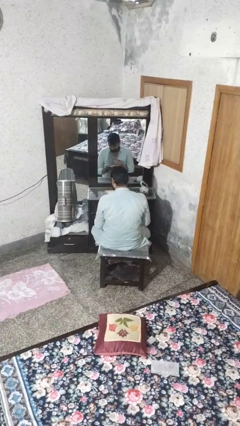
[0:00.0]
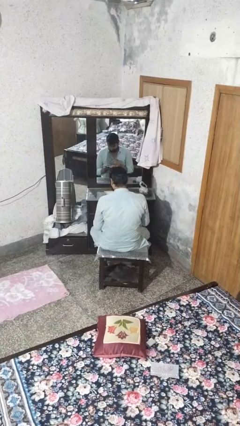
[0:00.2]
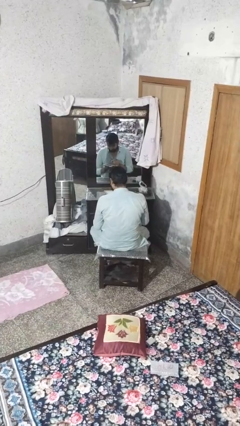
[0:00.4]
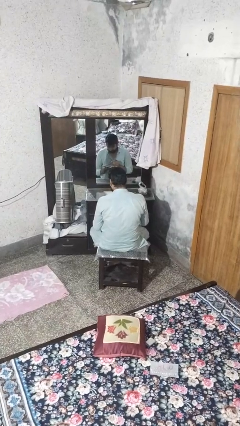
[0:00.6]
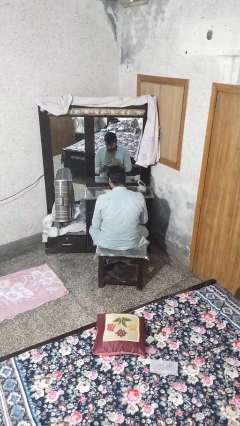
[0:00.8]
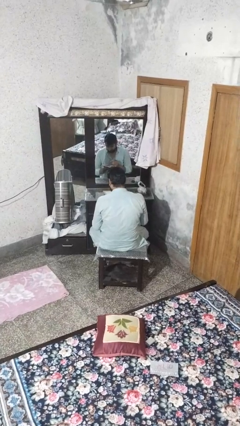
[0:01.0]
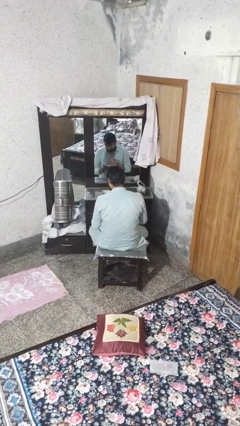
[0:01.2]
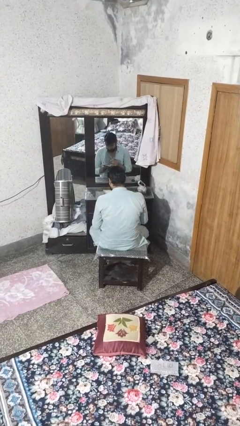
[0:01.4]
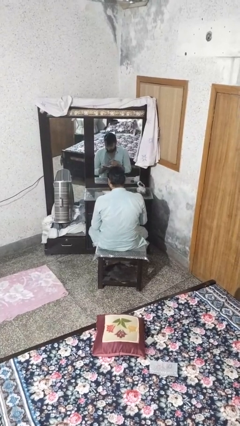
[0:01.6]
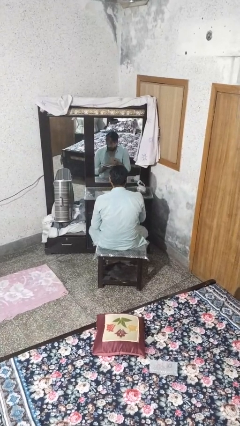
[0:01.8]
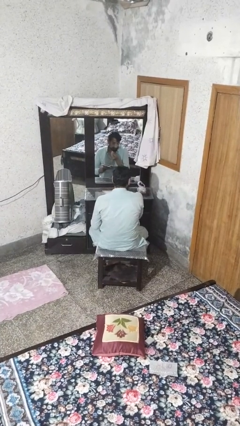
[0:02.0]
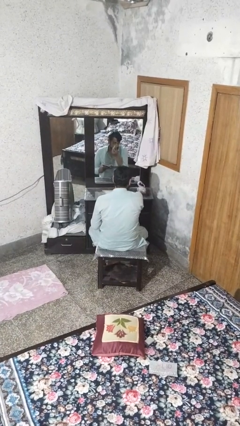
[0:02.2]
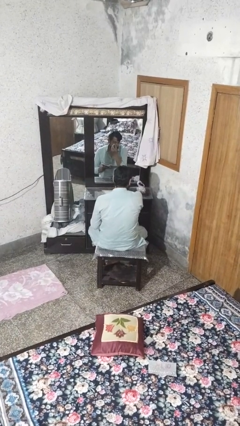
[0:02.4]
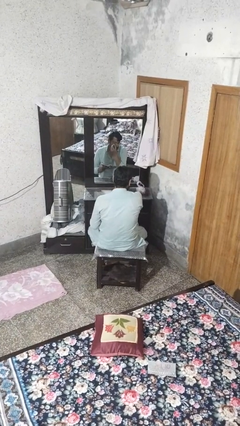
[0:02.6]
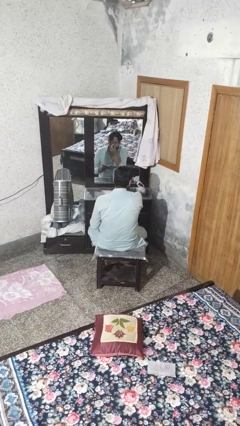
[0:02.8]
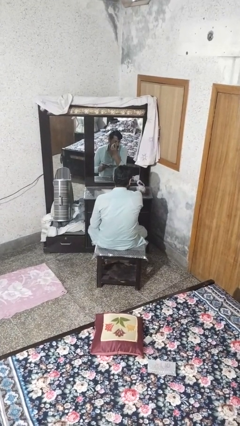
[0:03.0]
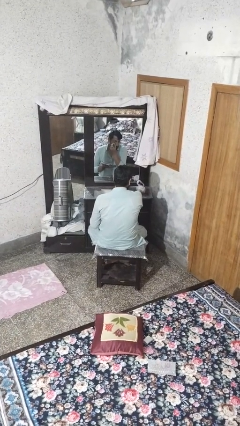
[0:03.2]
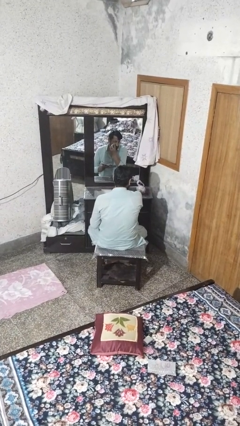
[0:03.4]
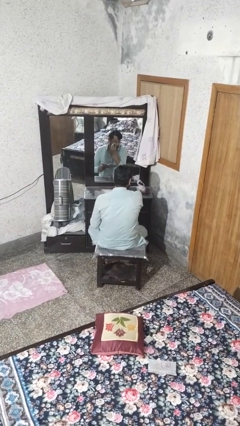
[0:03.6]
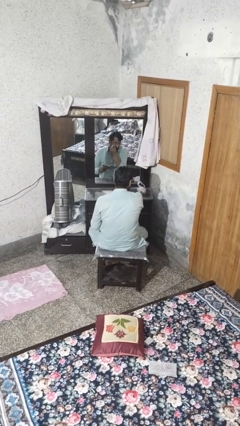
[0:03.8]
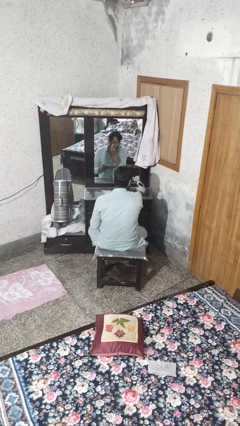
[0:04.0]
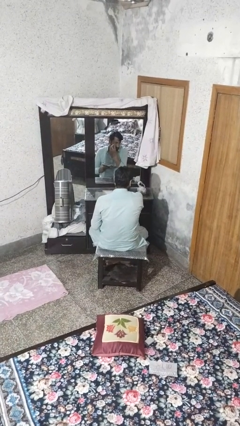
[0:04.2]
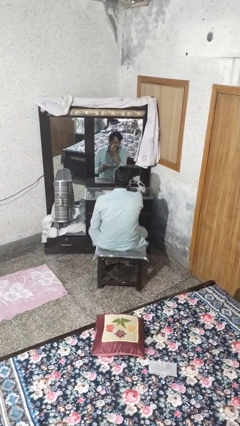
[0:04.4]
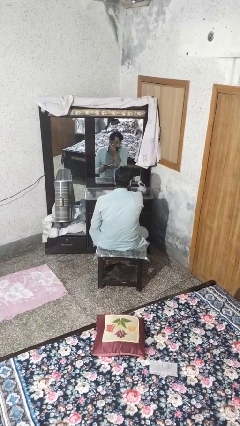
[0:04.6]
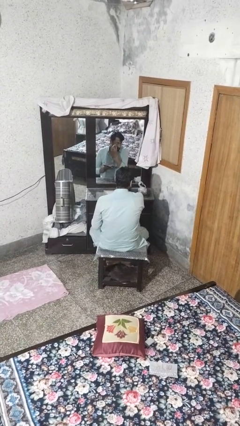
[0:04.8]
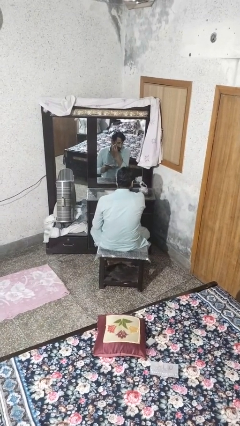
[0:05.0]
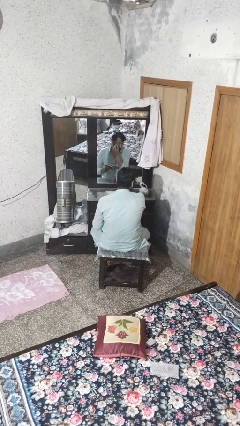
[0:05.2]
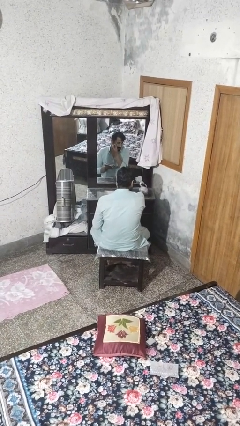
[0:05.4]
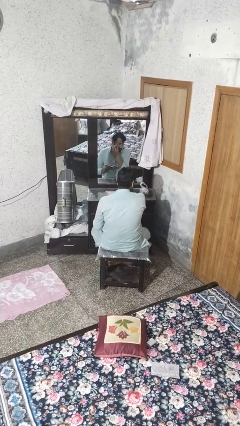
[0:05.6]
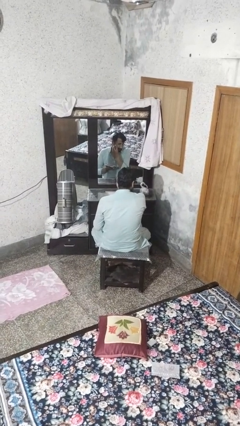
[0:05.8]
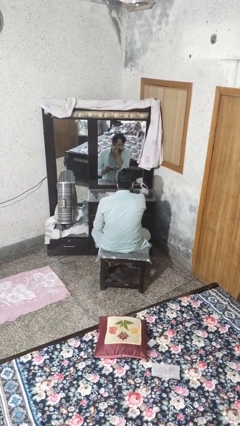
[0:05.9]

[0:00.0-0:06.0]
person applies eye makeup

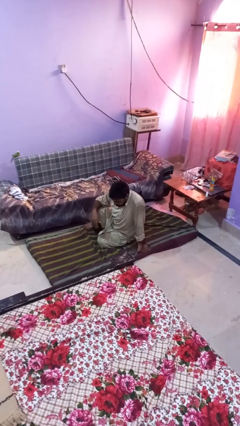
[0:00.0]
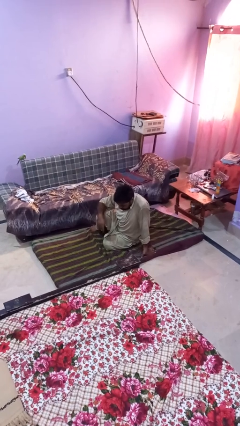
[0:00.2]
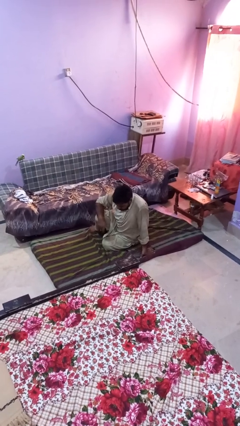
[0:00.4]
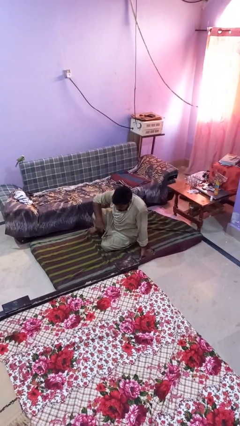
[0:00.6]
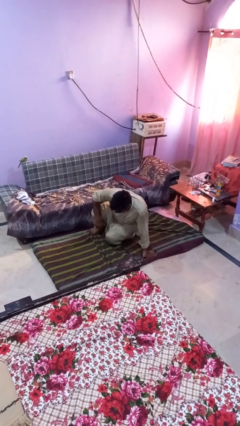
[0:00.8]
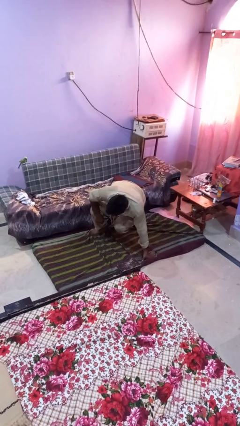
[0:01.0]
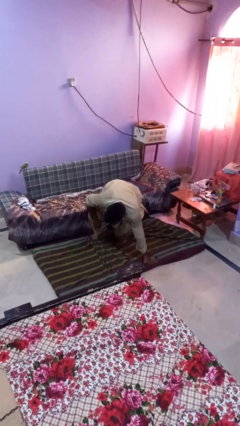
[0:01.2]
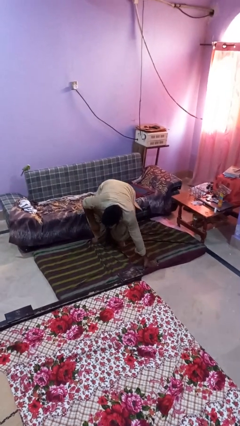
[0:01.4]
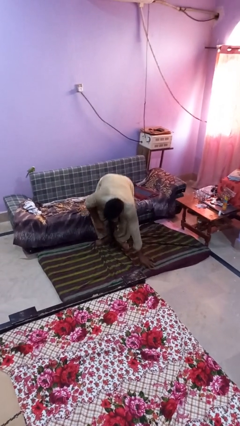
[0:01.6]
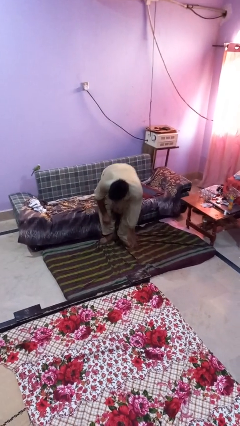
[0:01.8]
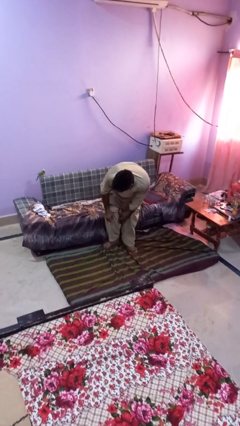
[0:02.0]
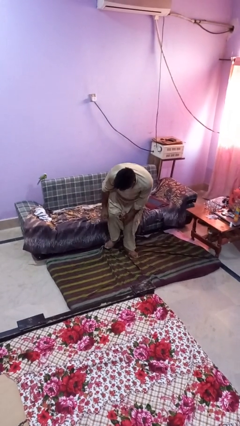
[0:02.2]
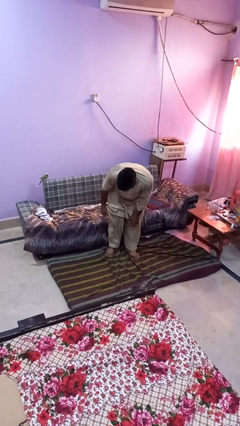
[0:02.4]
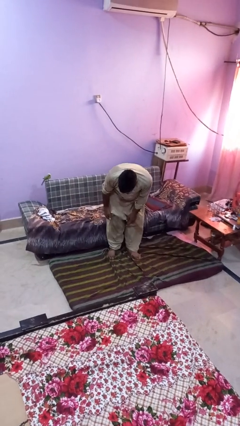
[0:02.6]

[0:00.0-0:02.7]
person stands up from floor

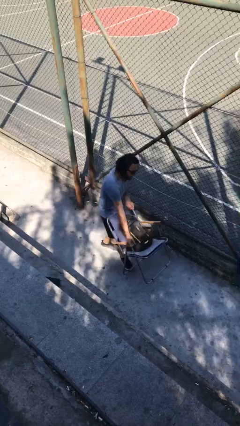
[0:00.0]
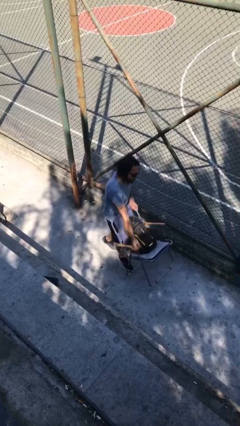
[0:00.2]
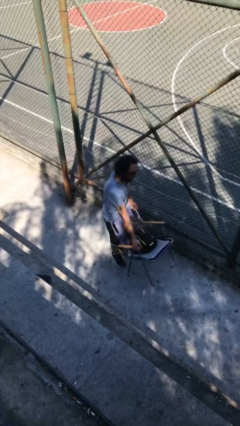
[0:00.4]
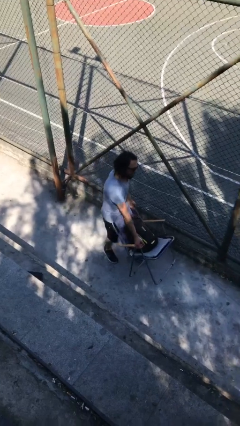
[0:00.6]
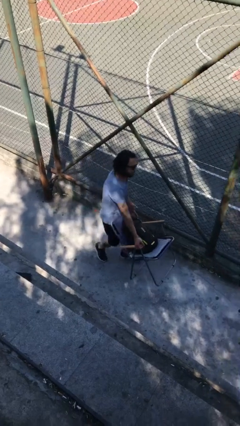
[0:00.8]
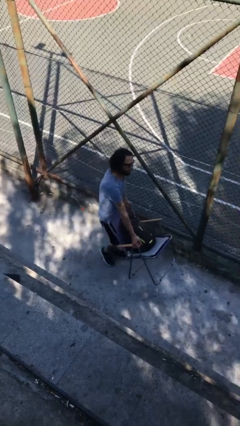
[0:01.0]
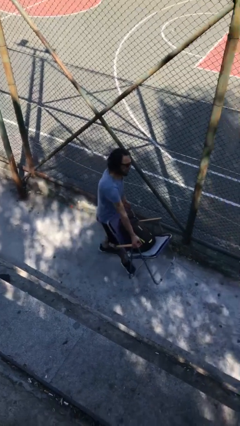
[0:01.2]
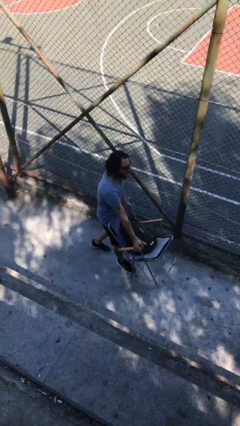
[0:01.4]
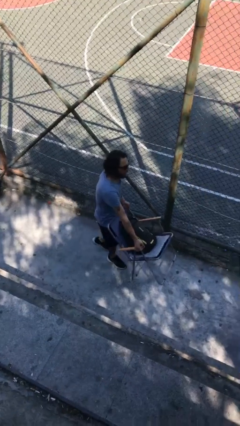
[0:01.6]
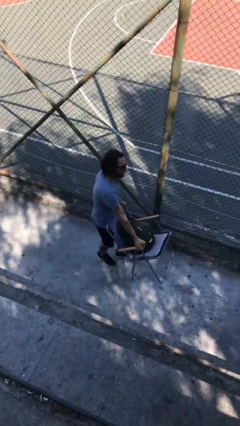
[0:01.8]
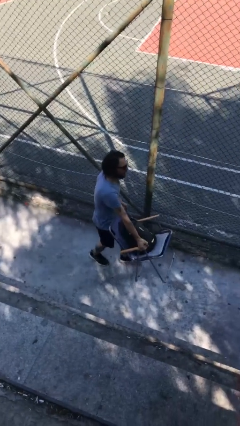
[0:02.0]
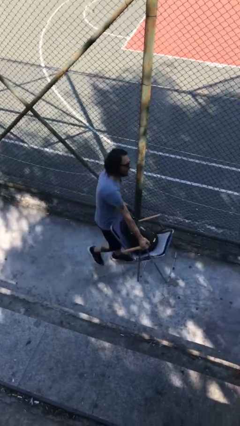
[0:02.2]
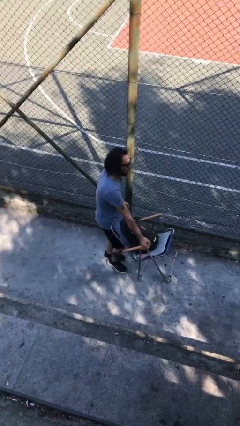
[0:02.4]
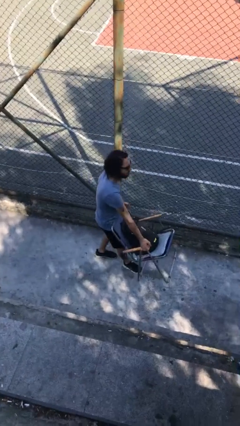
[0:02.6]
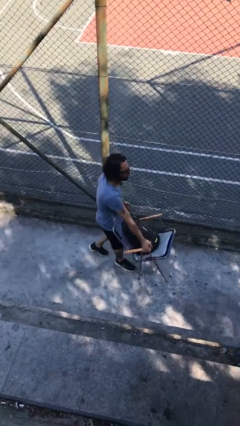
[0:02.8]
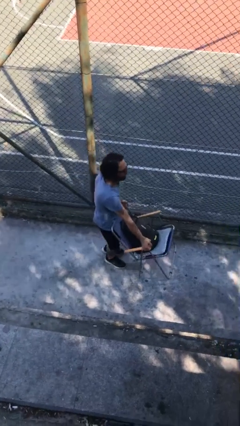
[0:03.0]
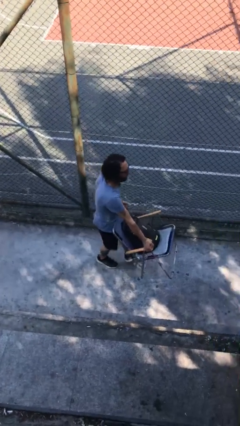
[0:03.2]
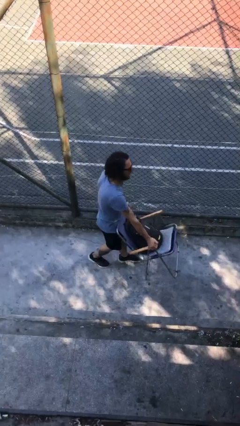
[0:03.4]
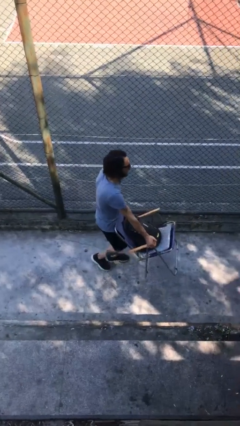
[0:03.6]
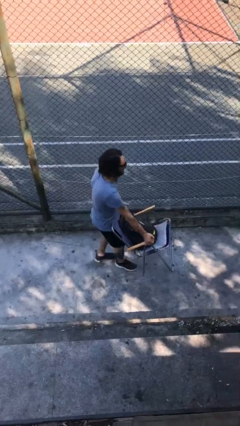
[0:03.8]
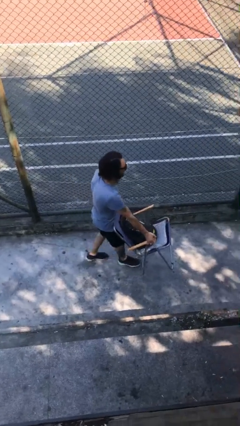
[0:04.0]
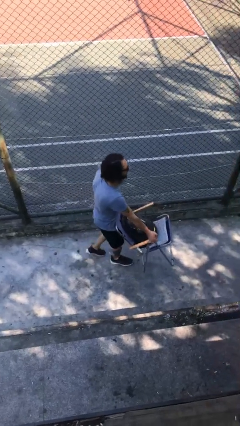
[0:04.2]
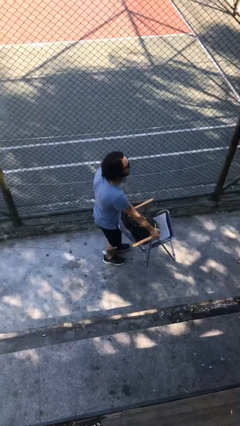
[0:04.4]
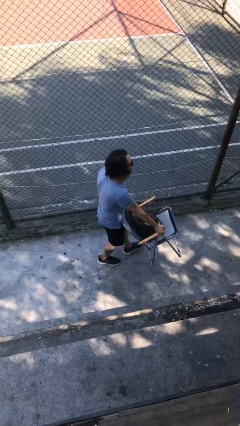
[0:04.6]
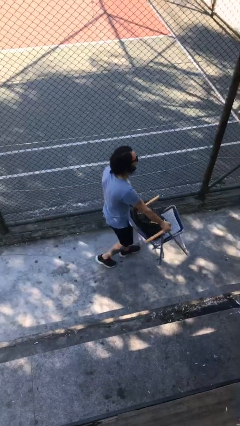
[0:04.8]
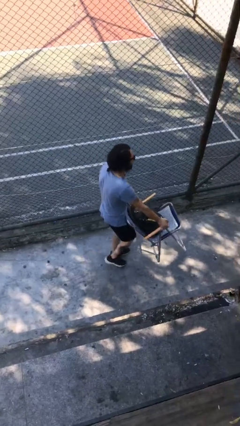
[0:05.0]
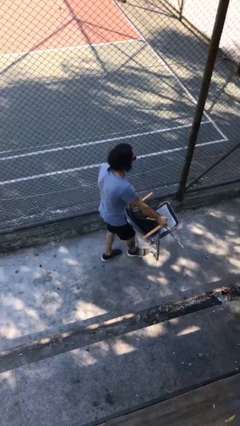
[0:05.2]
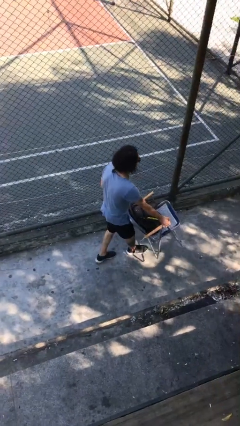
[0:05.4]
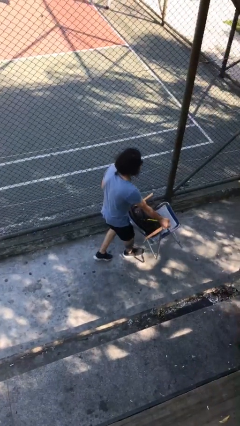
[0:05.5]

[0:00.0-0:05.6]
person carries heavy object

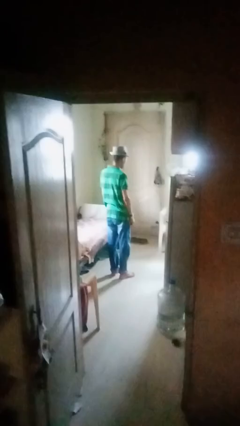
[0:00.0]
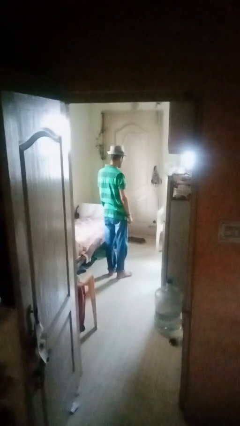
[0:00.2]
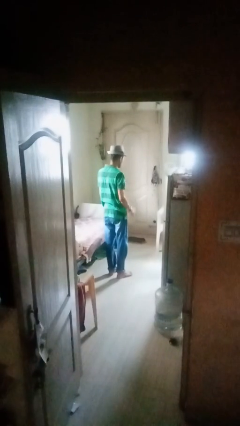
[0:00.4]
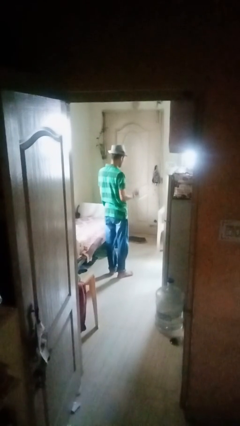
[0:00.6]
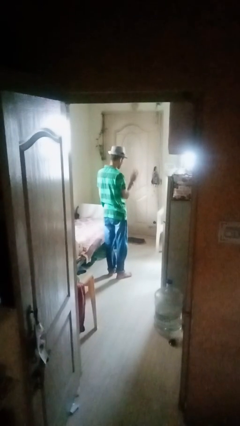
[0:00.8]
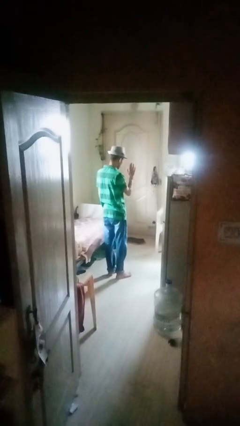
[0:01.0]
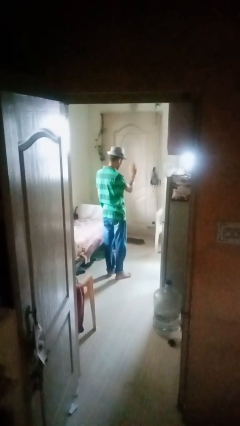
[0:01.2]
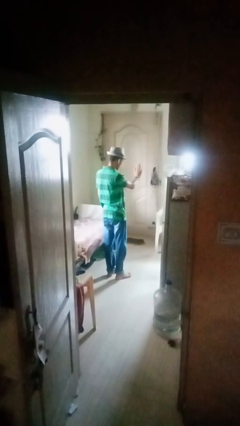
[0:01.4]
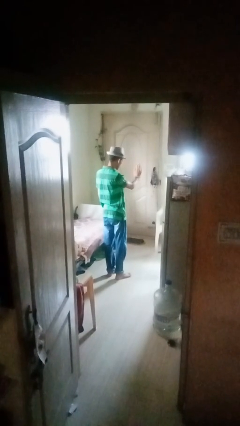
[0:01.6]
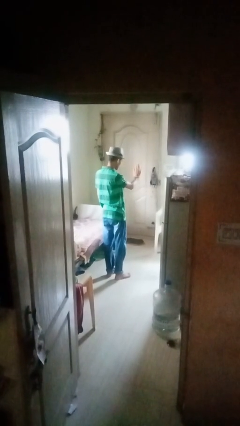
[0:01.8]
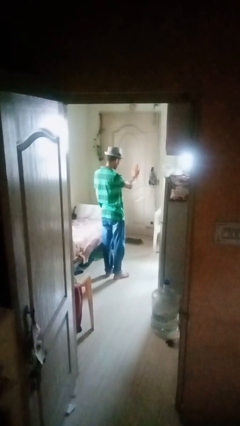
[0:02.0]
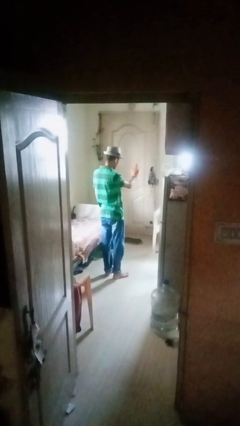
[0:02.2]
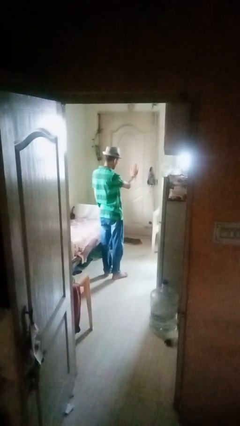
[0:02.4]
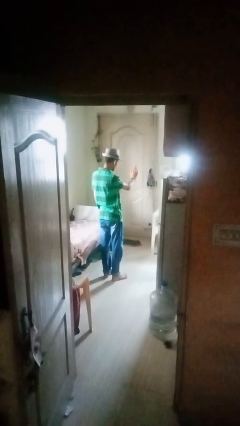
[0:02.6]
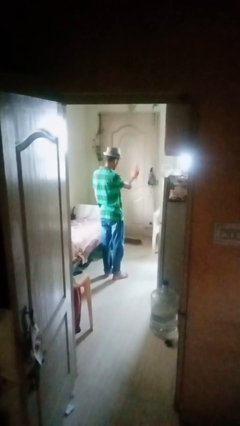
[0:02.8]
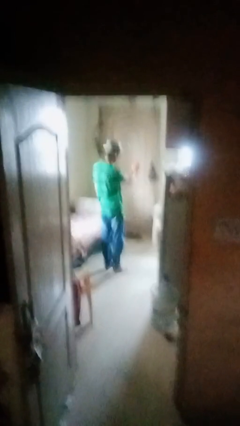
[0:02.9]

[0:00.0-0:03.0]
person gestures stop

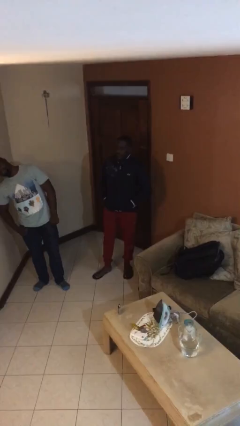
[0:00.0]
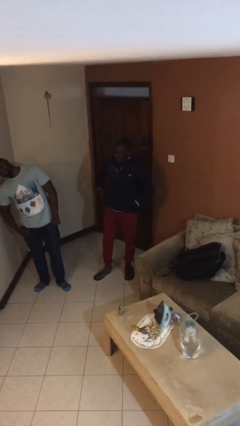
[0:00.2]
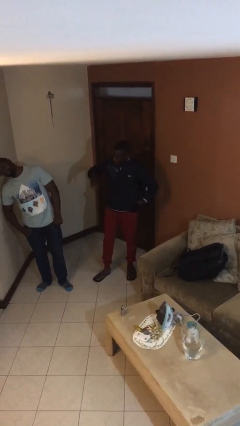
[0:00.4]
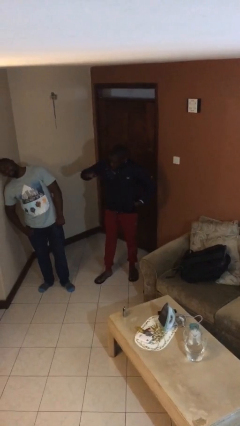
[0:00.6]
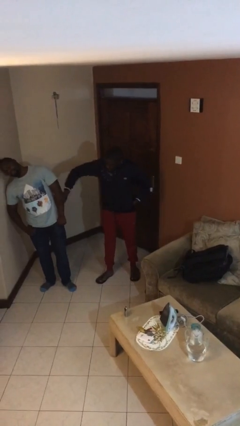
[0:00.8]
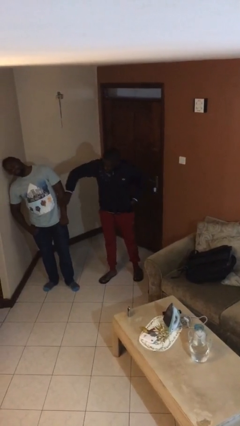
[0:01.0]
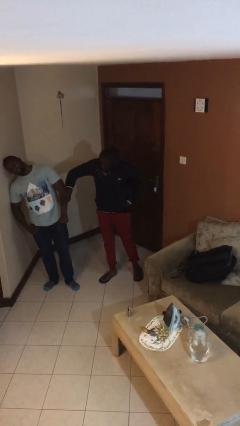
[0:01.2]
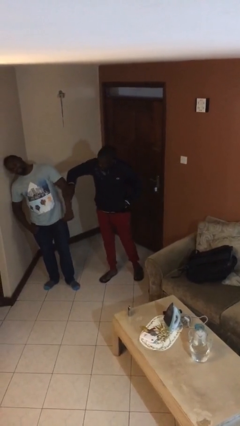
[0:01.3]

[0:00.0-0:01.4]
person grabs person by forearm
